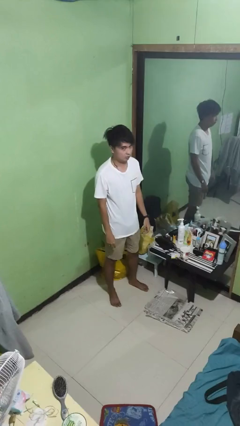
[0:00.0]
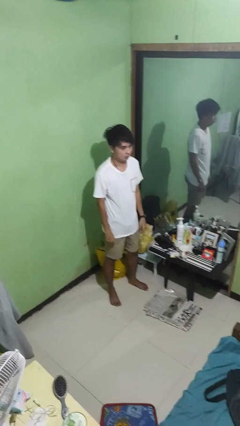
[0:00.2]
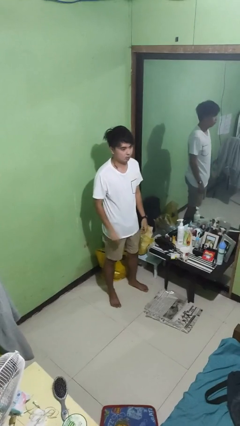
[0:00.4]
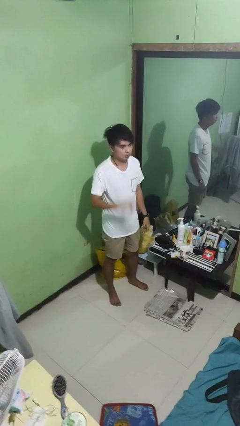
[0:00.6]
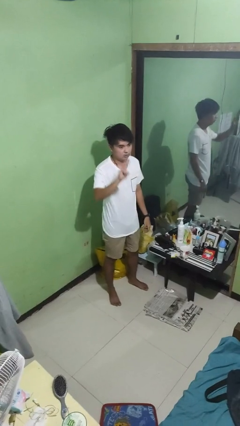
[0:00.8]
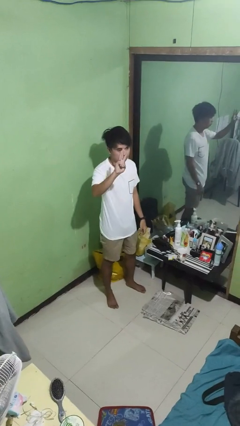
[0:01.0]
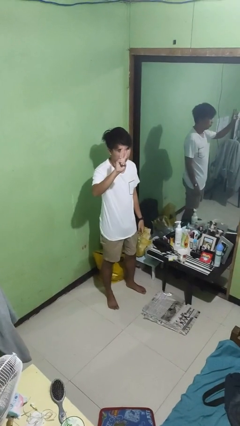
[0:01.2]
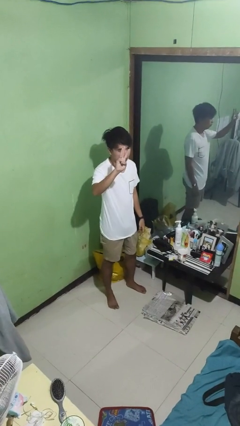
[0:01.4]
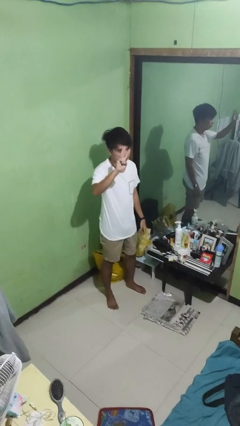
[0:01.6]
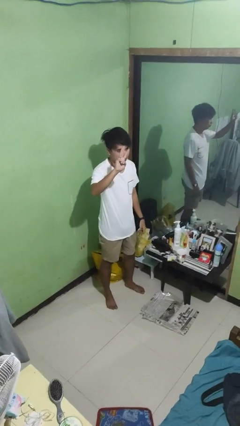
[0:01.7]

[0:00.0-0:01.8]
person gestures number three

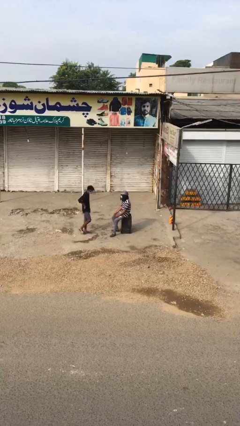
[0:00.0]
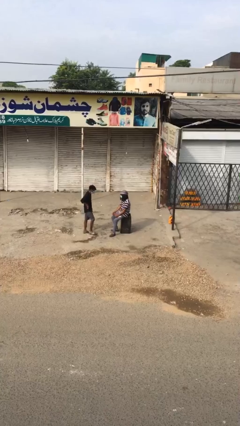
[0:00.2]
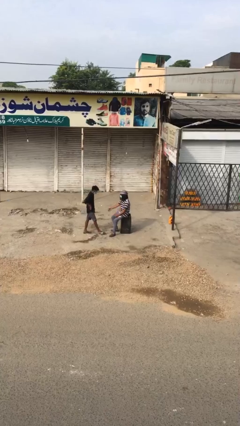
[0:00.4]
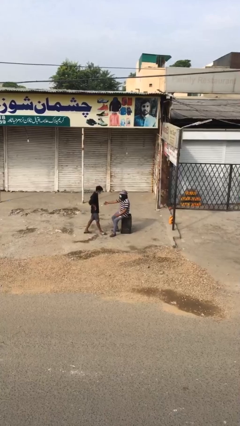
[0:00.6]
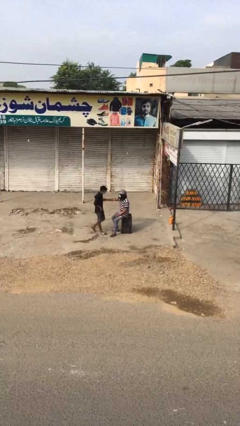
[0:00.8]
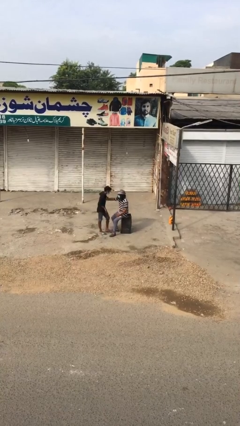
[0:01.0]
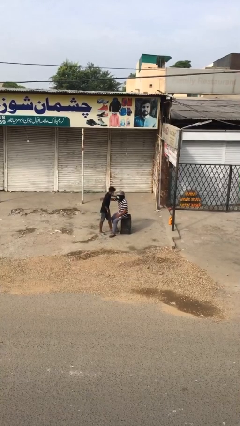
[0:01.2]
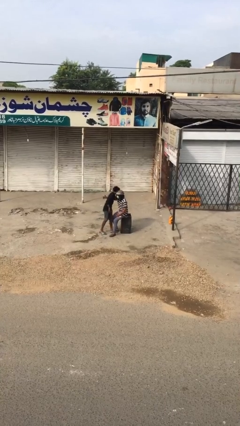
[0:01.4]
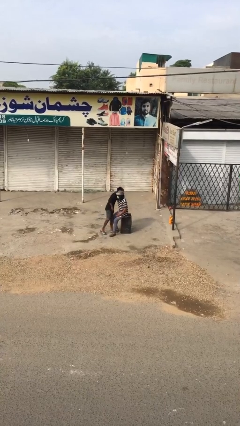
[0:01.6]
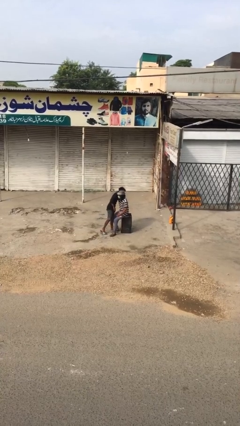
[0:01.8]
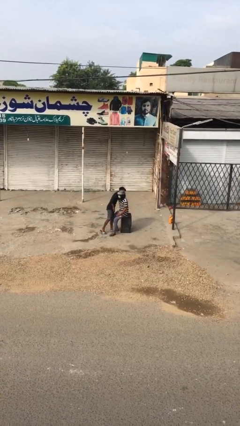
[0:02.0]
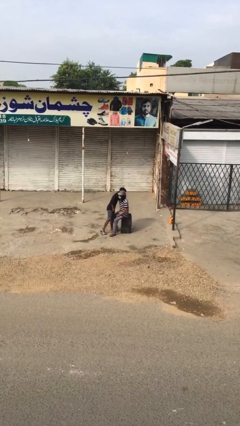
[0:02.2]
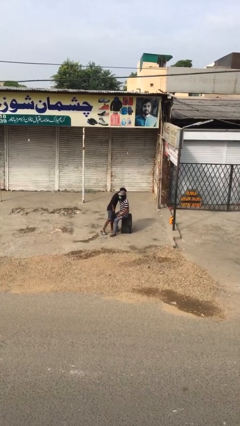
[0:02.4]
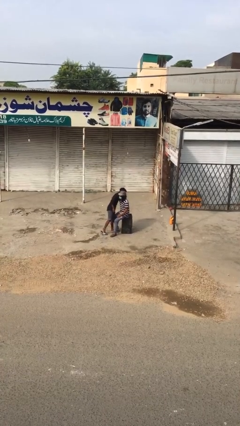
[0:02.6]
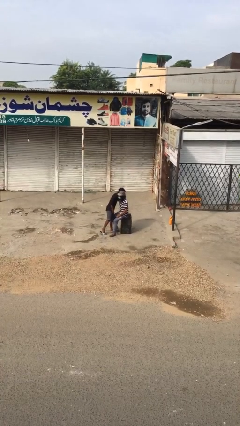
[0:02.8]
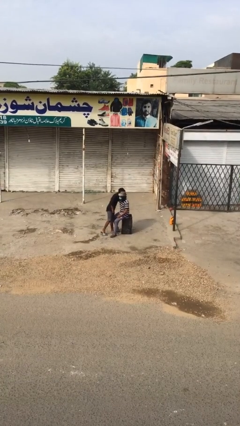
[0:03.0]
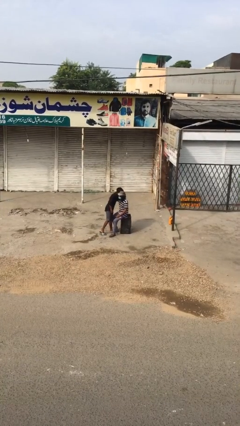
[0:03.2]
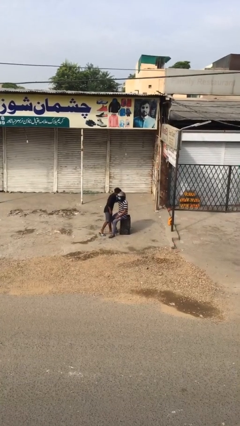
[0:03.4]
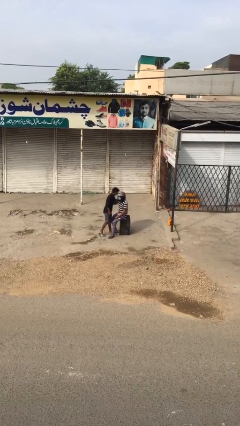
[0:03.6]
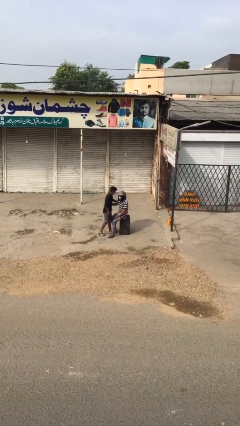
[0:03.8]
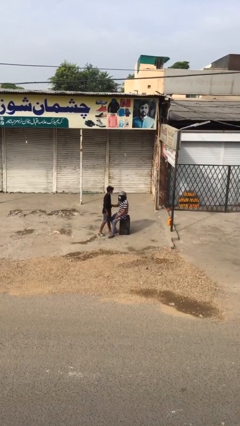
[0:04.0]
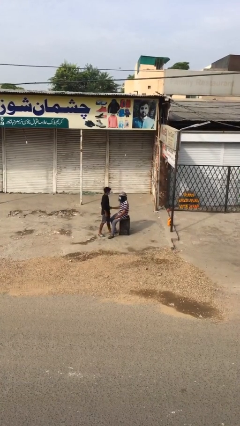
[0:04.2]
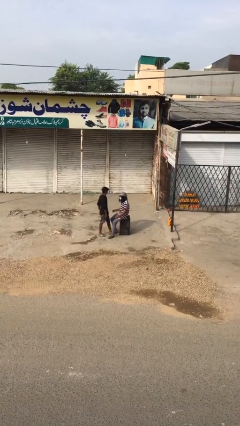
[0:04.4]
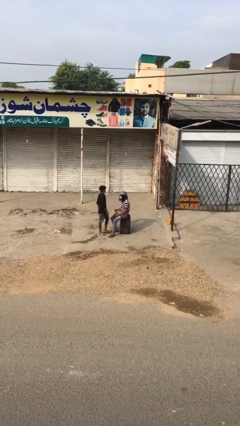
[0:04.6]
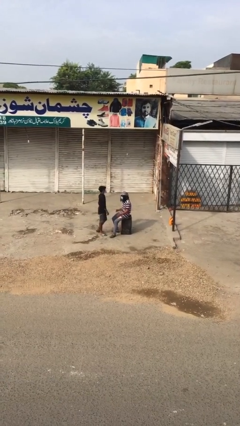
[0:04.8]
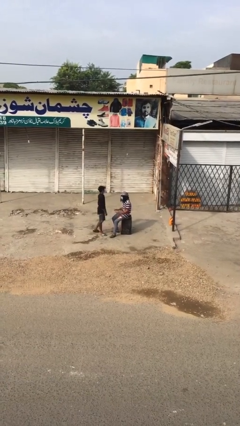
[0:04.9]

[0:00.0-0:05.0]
person embraces person

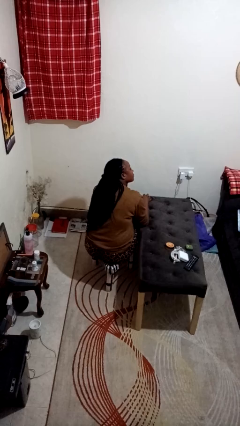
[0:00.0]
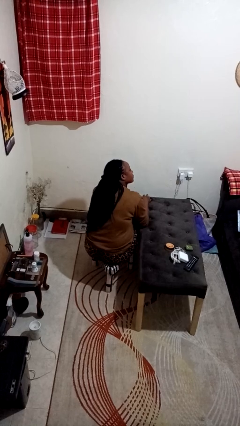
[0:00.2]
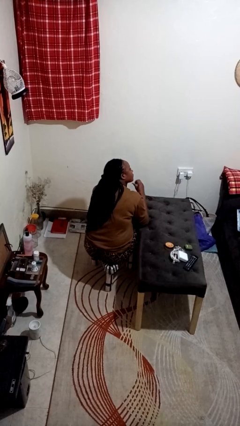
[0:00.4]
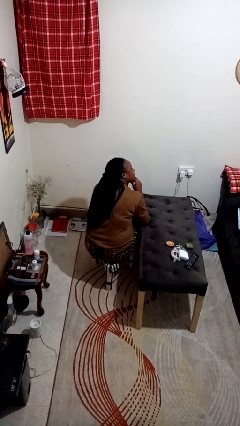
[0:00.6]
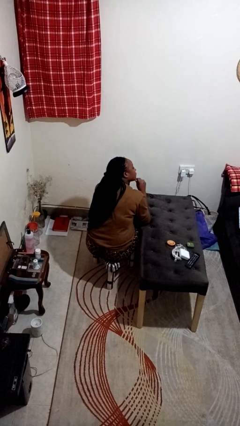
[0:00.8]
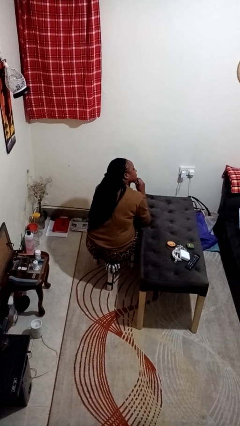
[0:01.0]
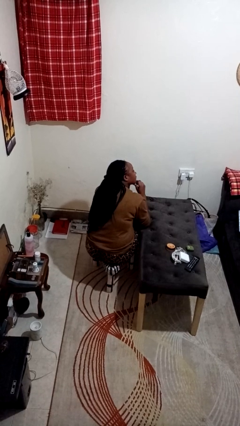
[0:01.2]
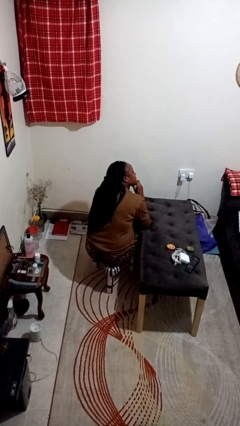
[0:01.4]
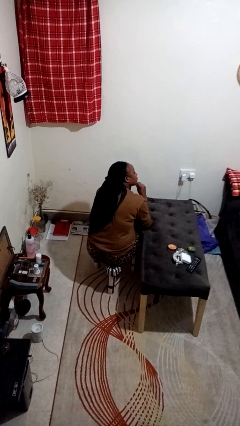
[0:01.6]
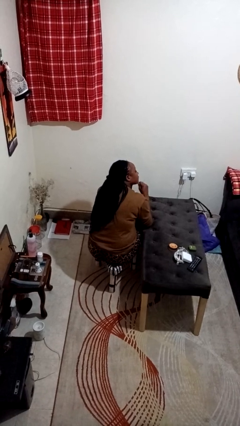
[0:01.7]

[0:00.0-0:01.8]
person strokes chin

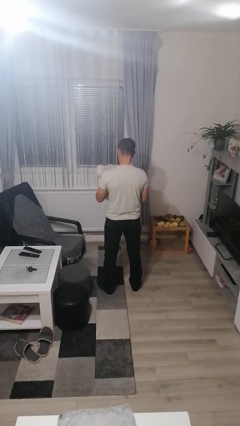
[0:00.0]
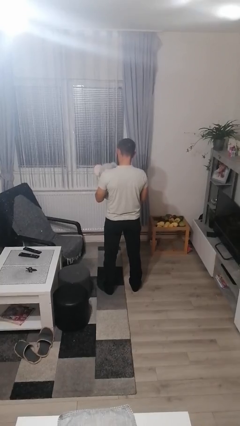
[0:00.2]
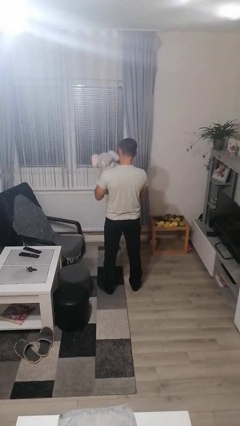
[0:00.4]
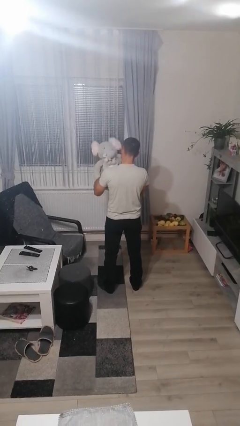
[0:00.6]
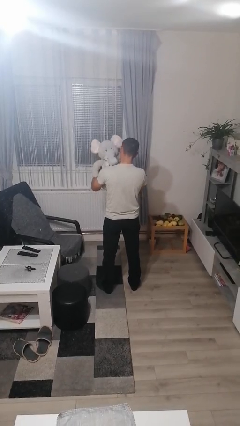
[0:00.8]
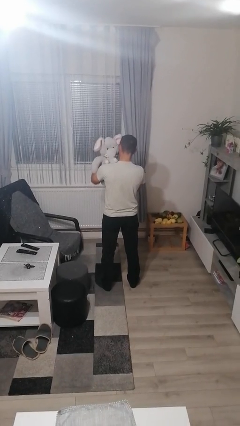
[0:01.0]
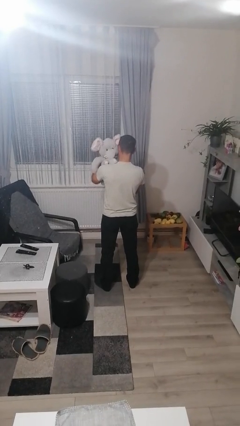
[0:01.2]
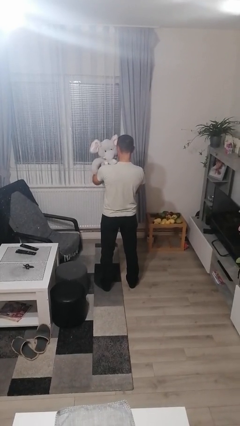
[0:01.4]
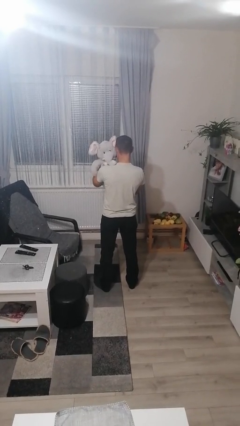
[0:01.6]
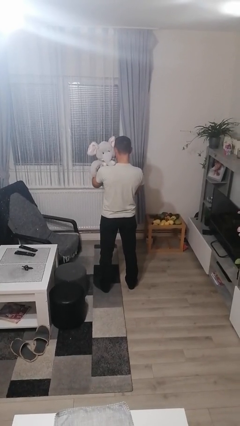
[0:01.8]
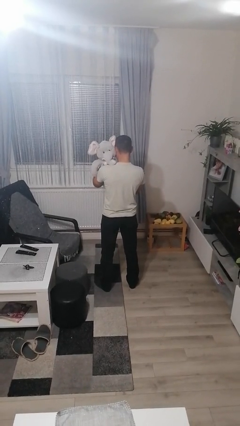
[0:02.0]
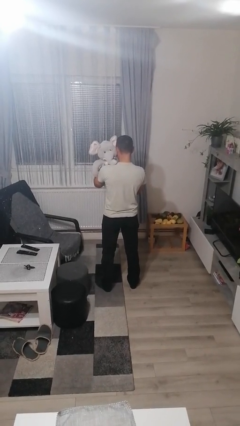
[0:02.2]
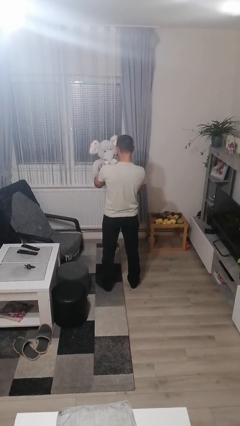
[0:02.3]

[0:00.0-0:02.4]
person hugs stuffed animal

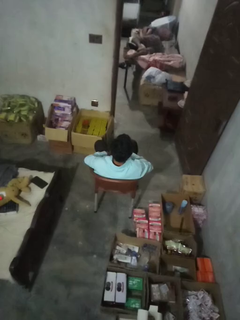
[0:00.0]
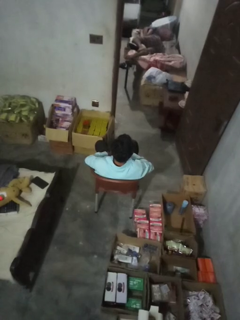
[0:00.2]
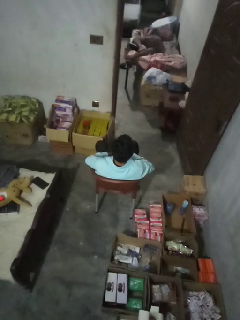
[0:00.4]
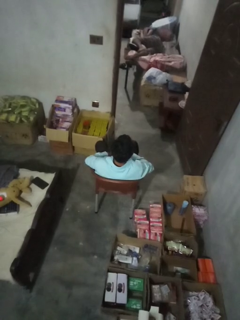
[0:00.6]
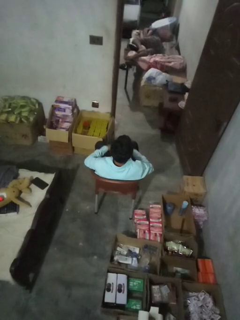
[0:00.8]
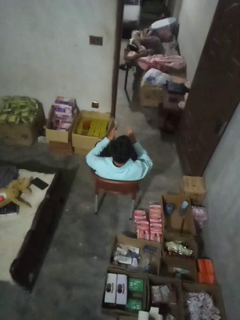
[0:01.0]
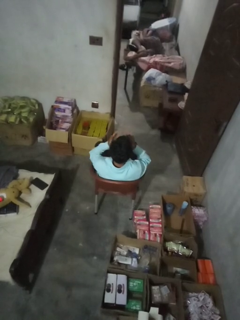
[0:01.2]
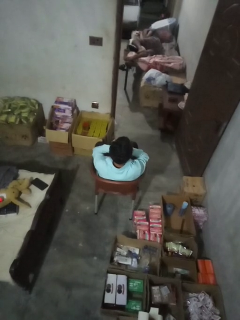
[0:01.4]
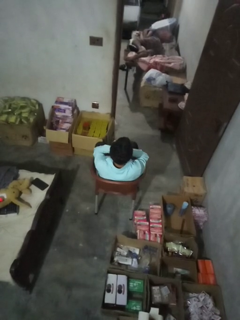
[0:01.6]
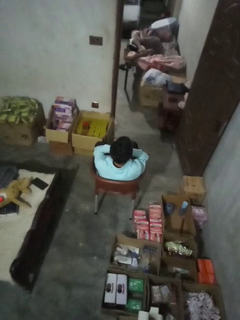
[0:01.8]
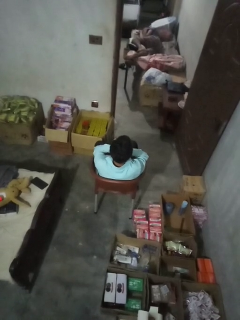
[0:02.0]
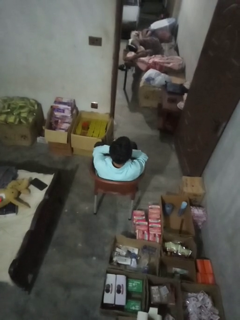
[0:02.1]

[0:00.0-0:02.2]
person covers face with hands

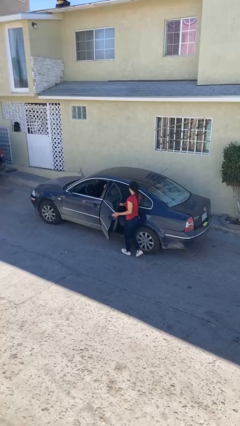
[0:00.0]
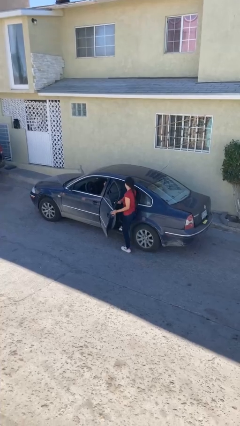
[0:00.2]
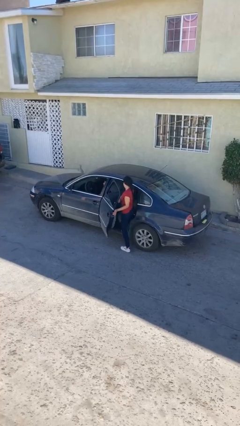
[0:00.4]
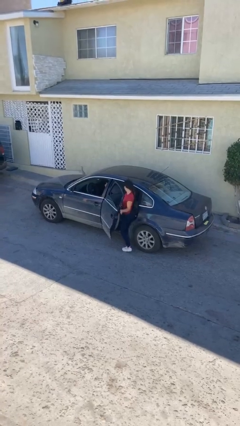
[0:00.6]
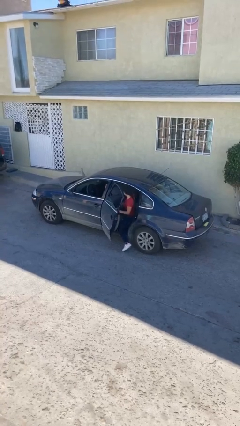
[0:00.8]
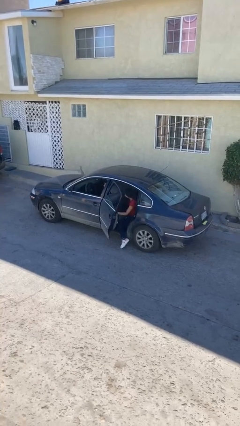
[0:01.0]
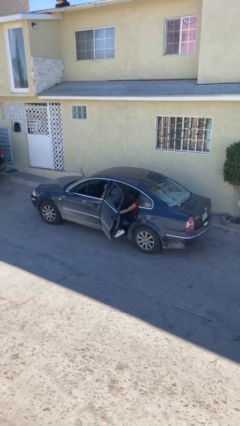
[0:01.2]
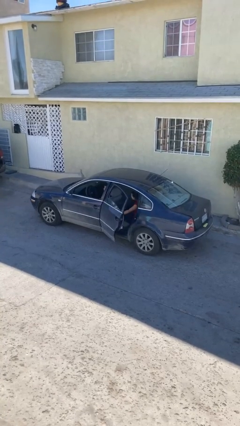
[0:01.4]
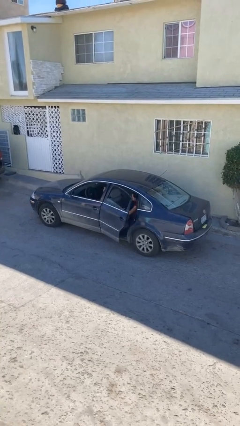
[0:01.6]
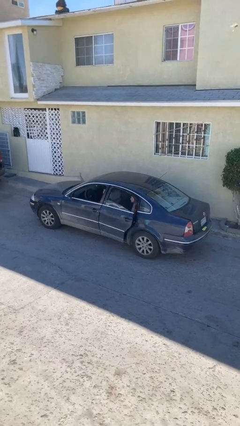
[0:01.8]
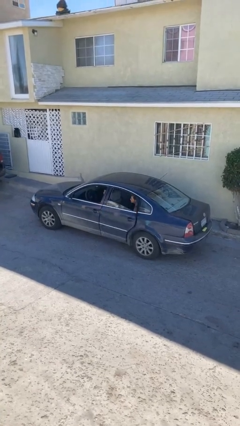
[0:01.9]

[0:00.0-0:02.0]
car picks up person

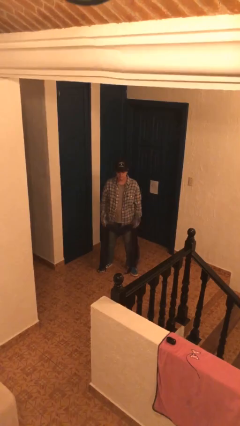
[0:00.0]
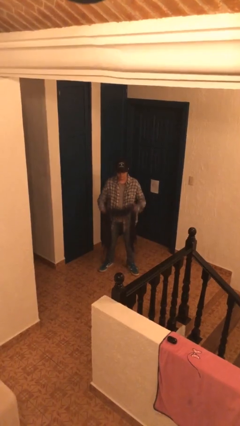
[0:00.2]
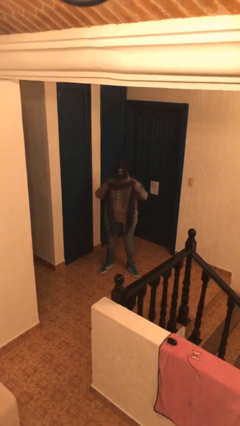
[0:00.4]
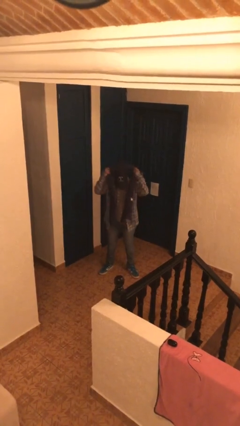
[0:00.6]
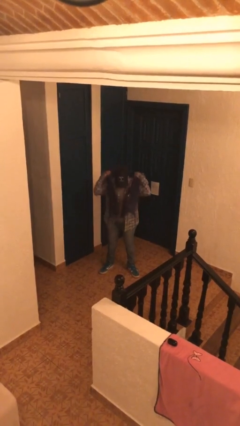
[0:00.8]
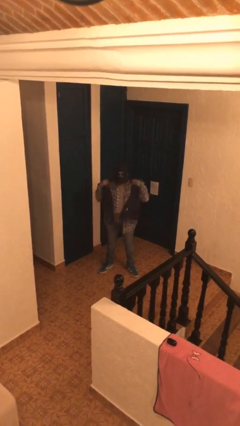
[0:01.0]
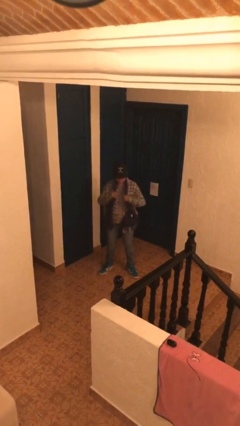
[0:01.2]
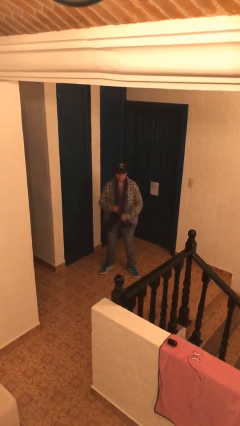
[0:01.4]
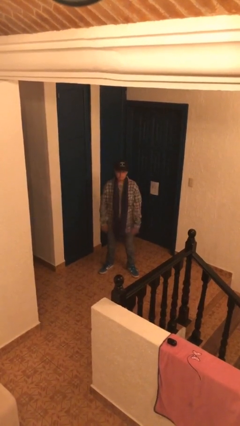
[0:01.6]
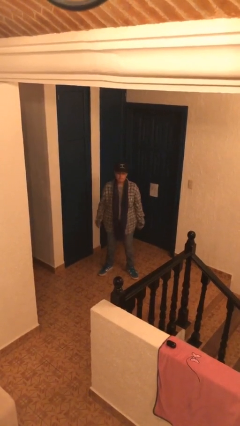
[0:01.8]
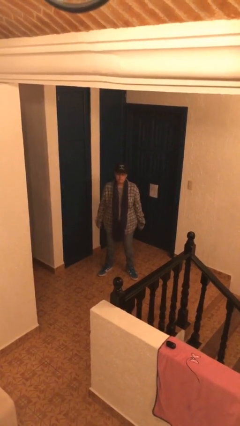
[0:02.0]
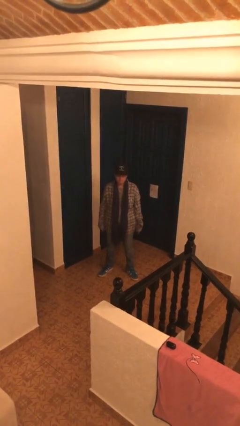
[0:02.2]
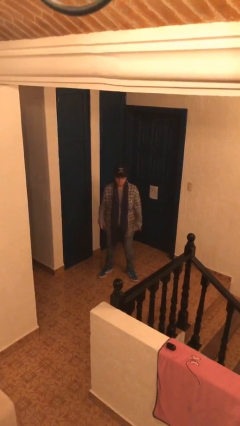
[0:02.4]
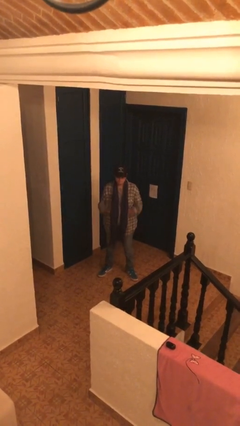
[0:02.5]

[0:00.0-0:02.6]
person puts on scarf
